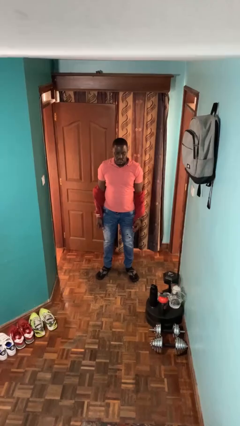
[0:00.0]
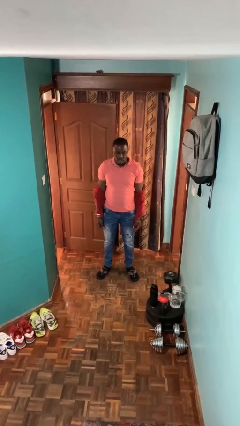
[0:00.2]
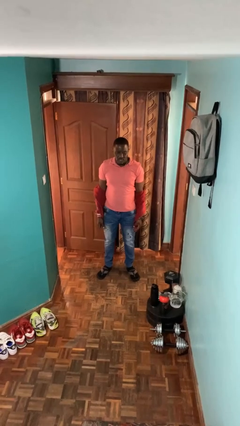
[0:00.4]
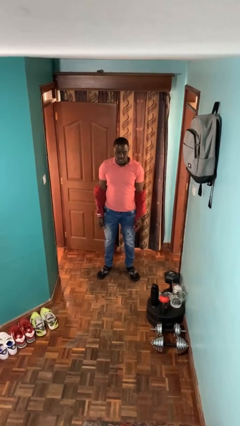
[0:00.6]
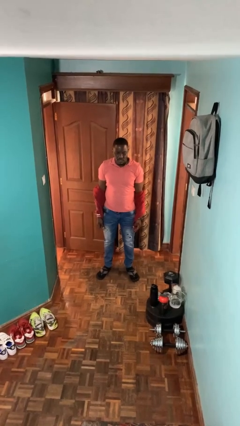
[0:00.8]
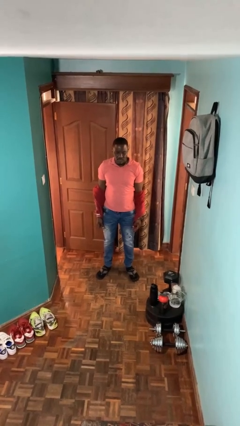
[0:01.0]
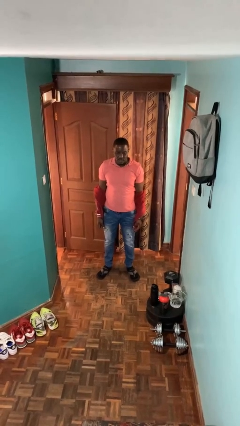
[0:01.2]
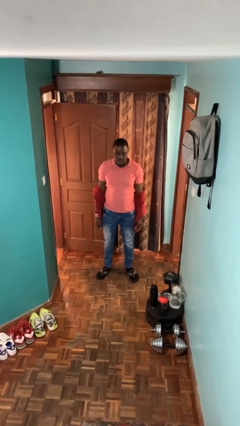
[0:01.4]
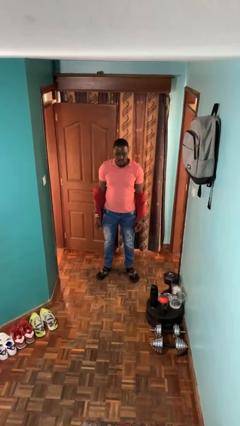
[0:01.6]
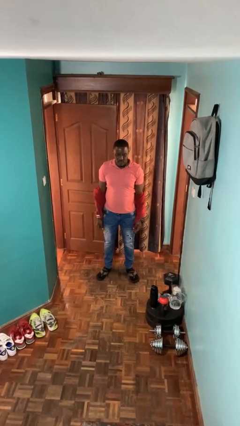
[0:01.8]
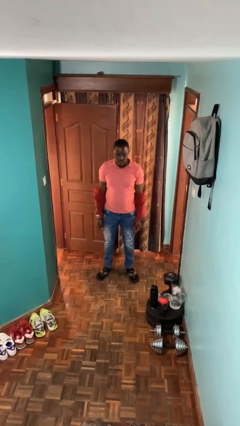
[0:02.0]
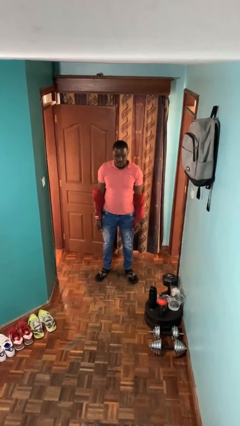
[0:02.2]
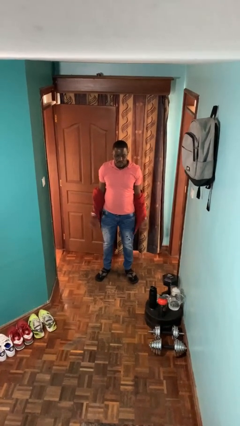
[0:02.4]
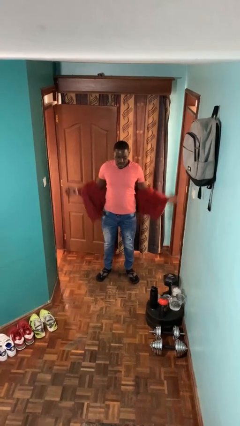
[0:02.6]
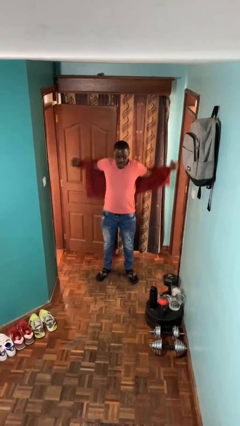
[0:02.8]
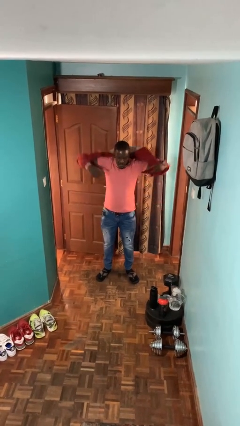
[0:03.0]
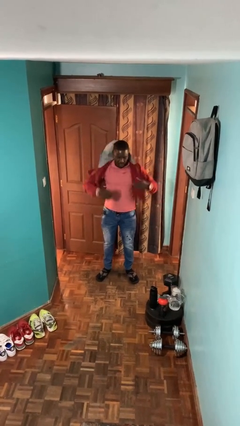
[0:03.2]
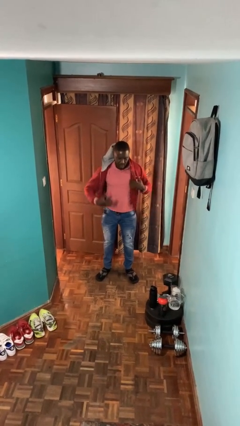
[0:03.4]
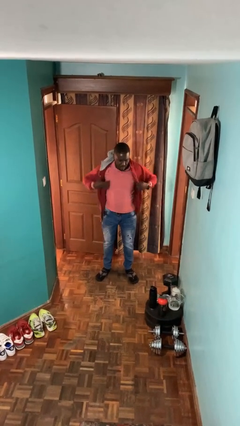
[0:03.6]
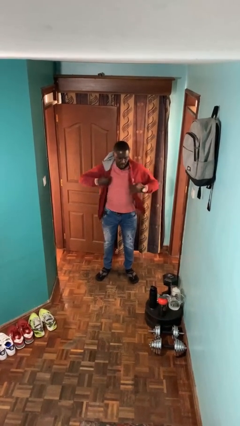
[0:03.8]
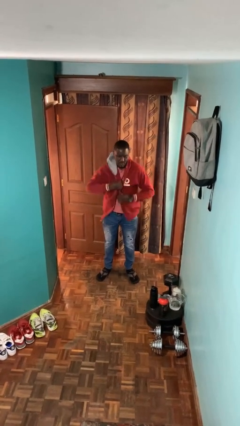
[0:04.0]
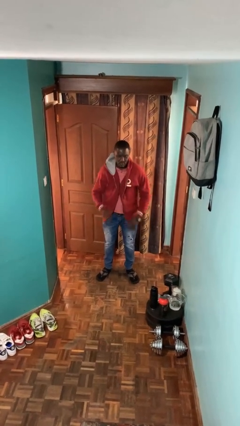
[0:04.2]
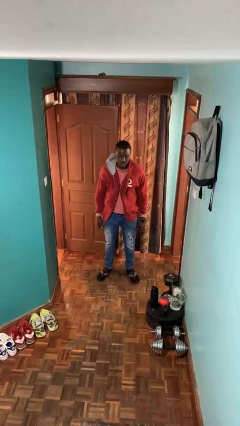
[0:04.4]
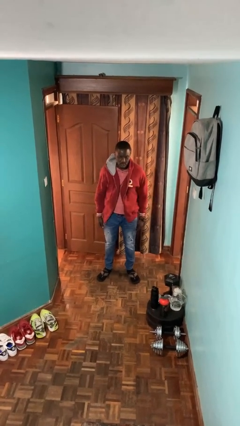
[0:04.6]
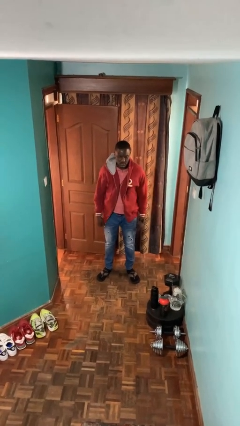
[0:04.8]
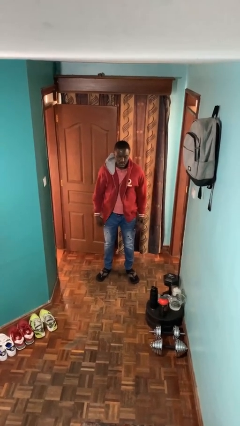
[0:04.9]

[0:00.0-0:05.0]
person puts on jacket

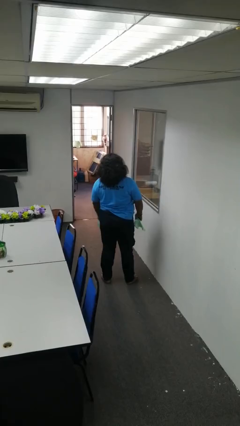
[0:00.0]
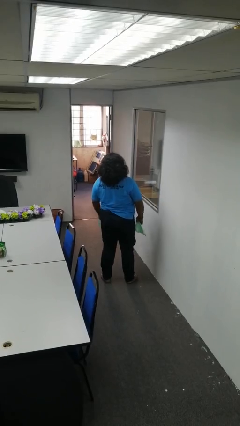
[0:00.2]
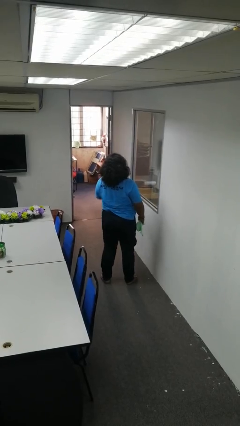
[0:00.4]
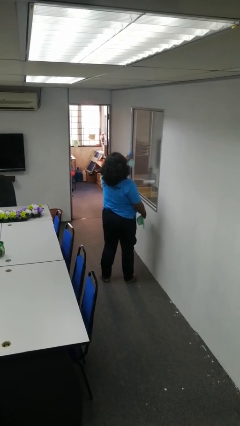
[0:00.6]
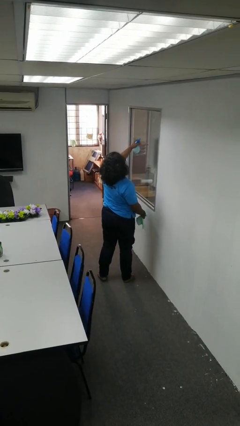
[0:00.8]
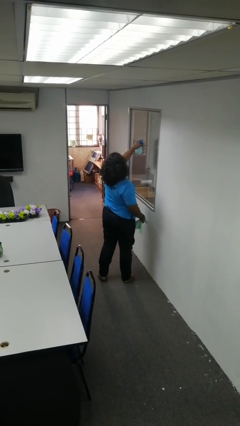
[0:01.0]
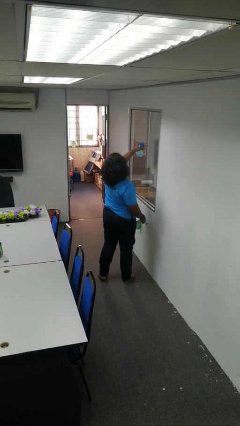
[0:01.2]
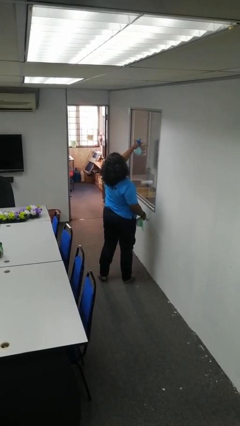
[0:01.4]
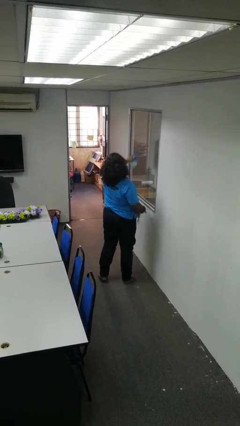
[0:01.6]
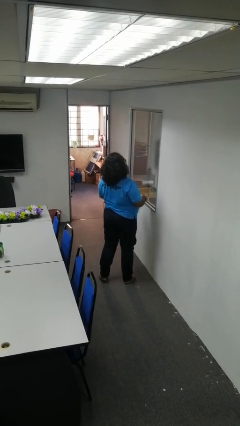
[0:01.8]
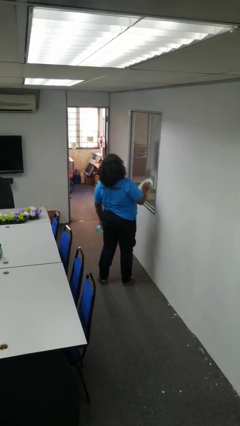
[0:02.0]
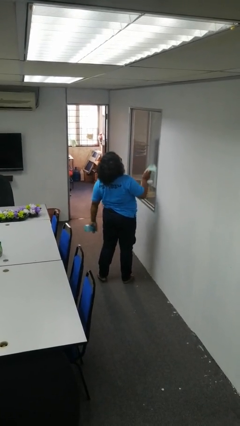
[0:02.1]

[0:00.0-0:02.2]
person sprays from bottle

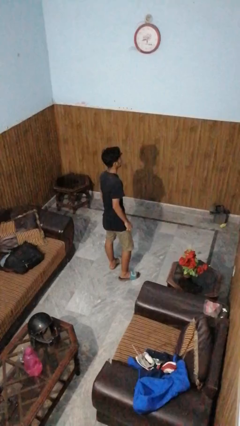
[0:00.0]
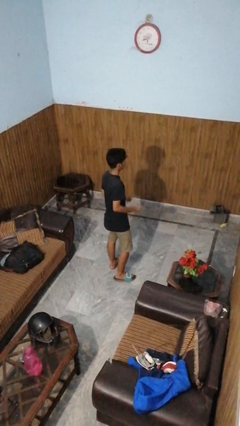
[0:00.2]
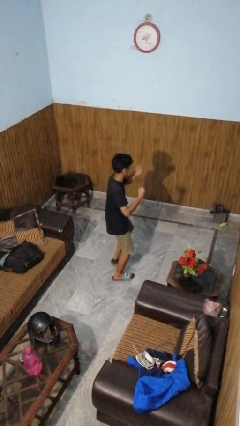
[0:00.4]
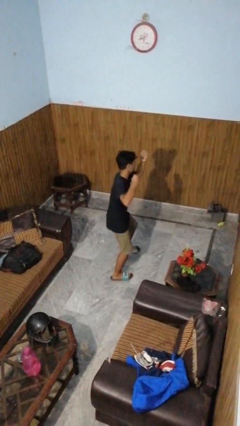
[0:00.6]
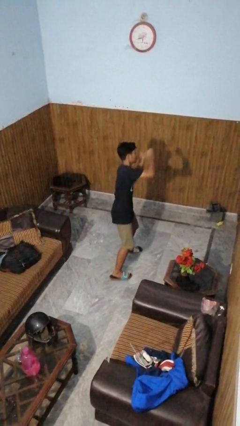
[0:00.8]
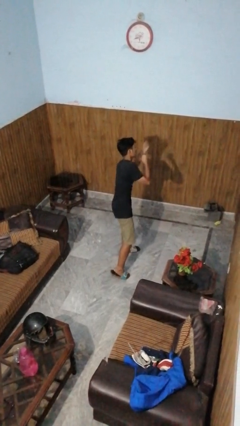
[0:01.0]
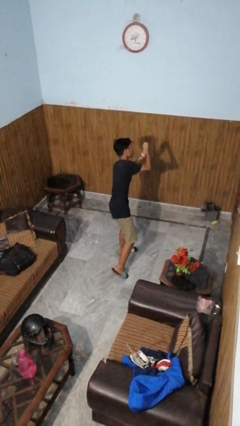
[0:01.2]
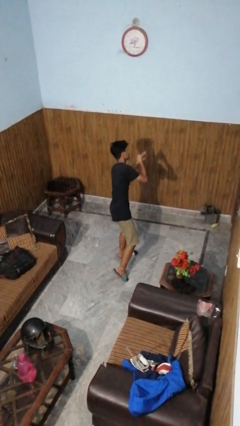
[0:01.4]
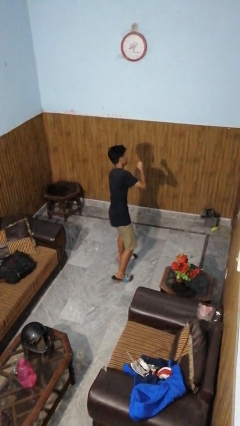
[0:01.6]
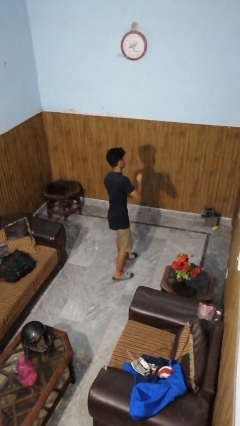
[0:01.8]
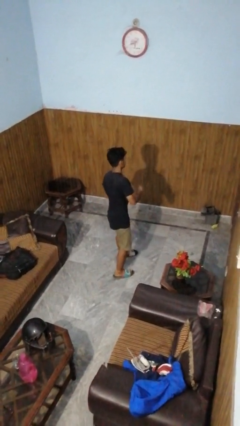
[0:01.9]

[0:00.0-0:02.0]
person punches

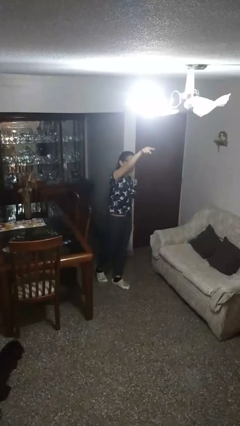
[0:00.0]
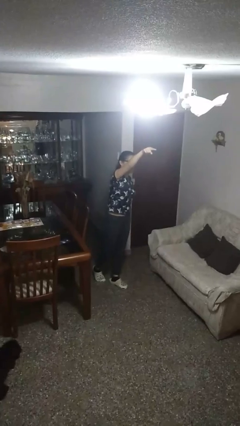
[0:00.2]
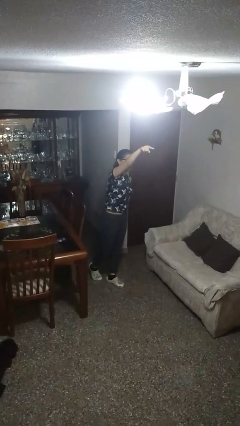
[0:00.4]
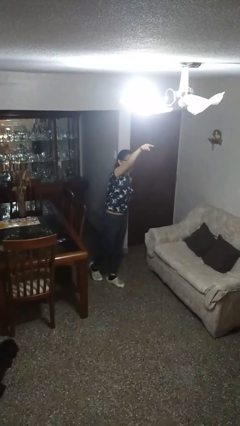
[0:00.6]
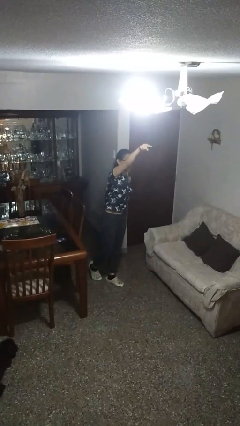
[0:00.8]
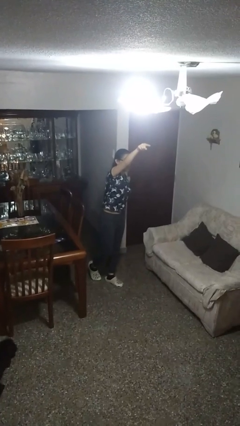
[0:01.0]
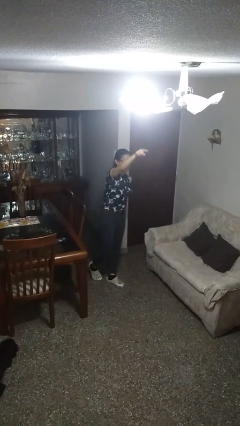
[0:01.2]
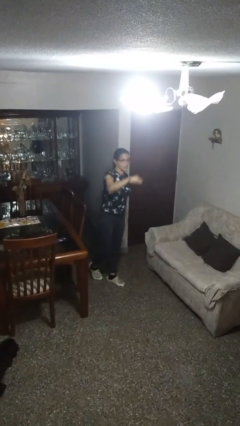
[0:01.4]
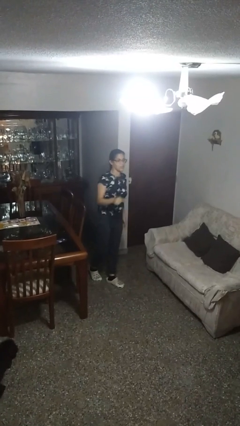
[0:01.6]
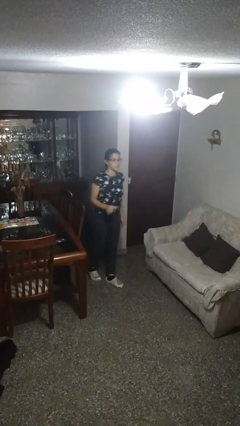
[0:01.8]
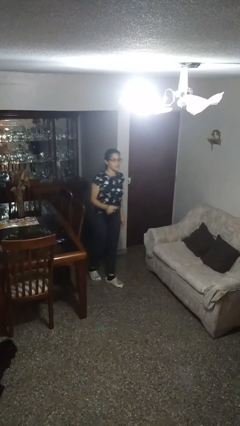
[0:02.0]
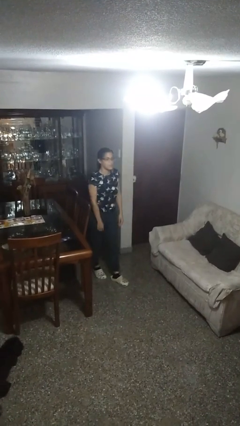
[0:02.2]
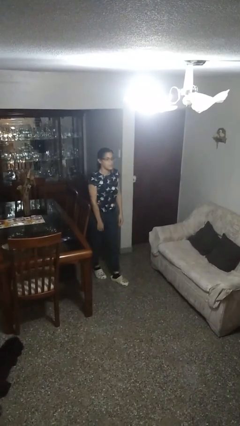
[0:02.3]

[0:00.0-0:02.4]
person points at person

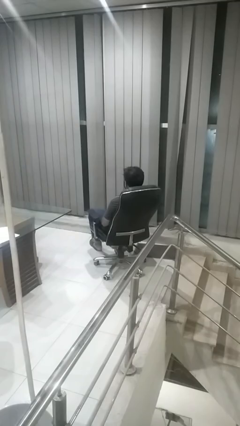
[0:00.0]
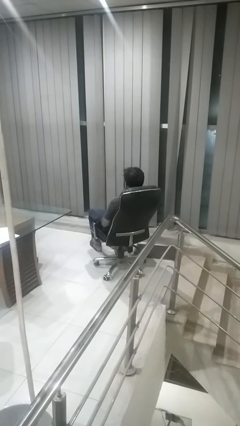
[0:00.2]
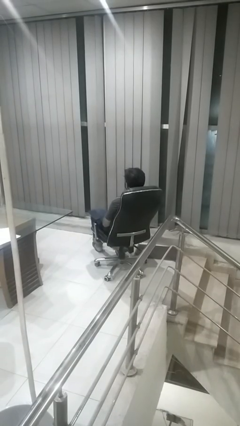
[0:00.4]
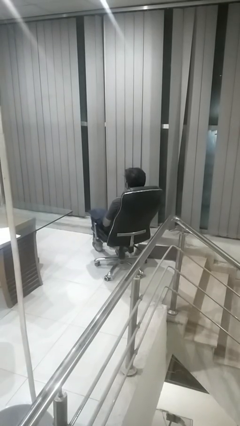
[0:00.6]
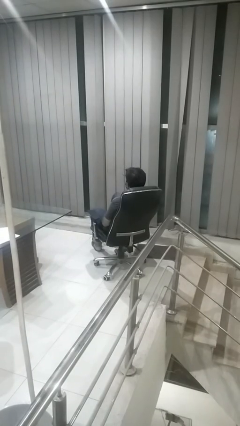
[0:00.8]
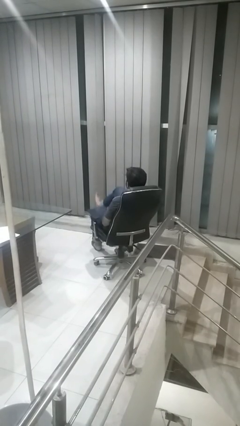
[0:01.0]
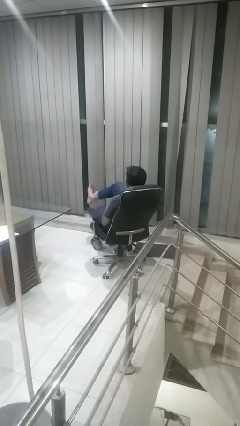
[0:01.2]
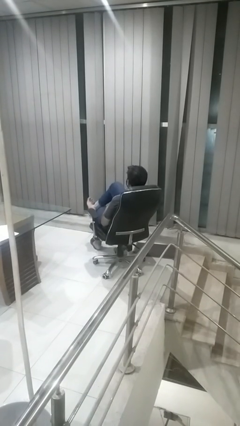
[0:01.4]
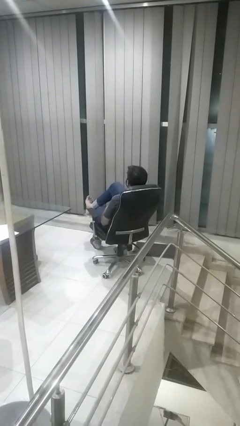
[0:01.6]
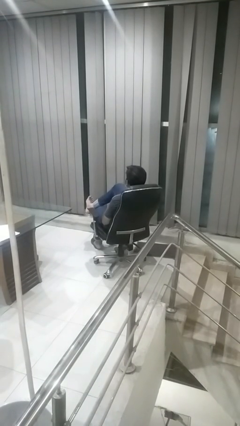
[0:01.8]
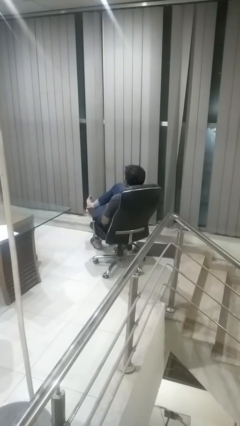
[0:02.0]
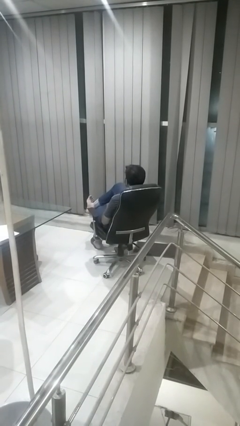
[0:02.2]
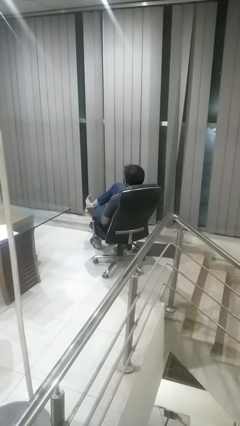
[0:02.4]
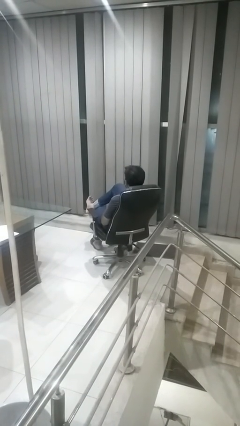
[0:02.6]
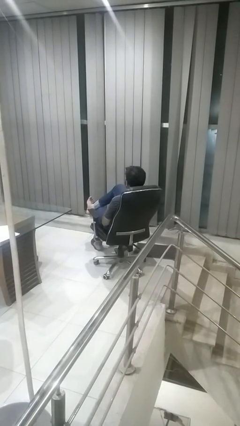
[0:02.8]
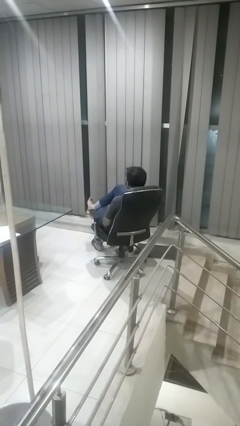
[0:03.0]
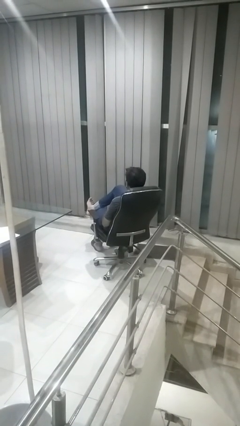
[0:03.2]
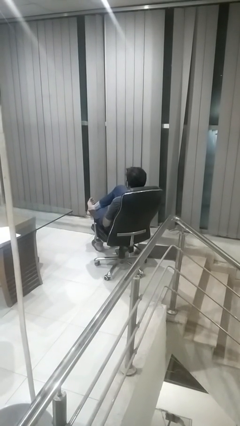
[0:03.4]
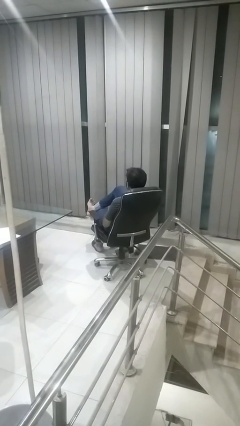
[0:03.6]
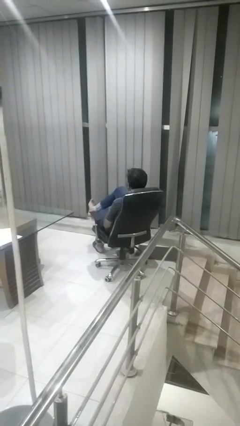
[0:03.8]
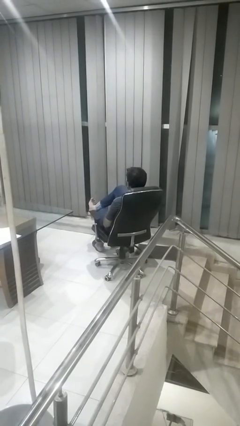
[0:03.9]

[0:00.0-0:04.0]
person crosses legs

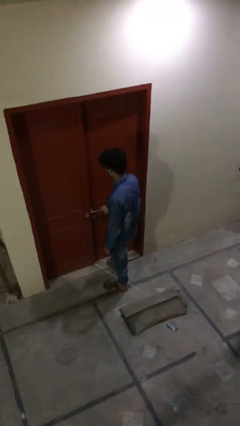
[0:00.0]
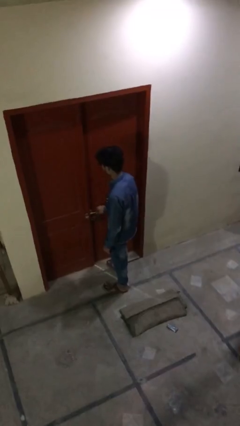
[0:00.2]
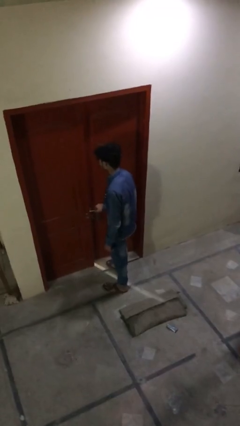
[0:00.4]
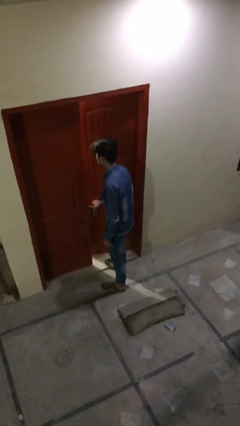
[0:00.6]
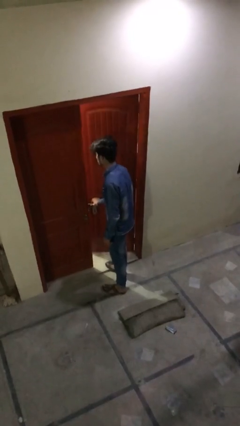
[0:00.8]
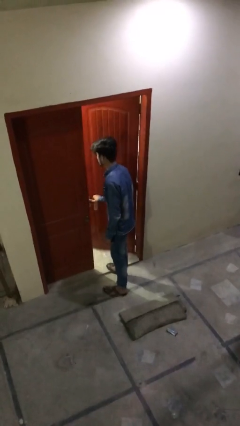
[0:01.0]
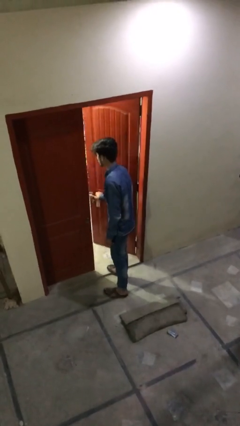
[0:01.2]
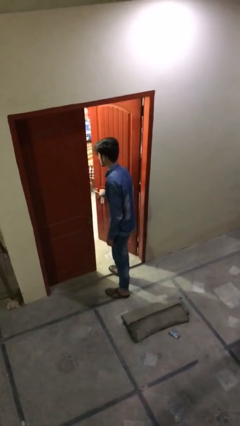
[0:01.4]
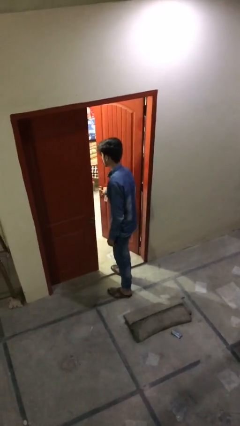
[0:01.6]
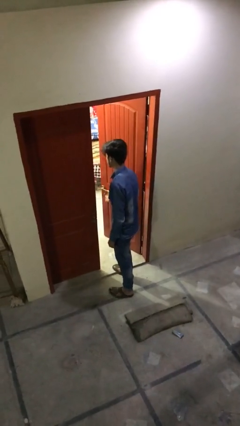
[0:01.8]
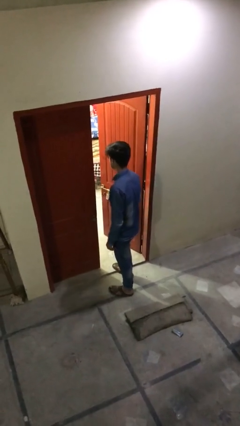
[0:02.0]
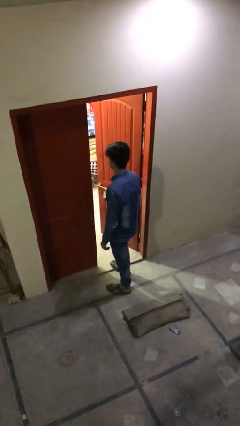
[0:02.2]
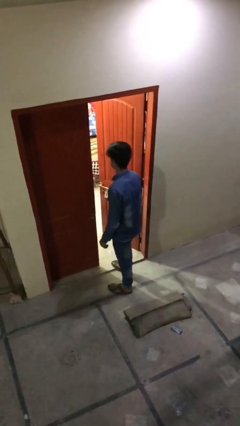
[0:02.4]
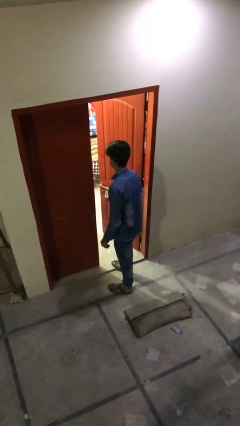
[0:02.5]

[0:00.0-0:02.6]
person opens facility door
